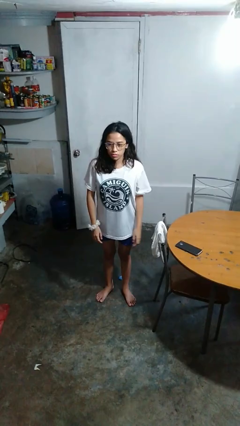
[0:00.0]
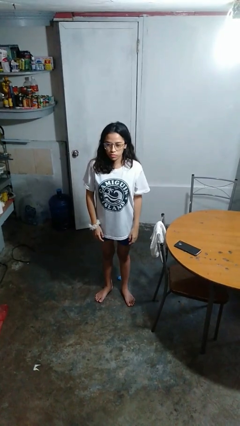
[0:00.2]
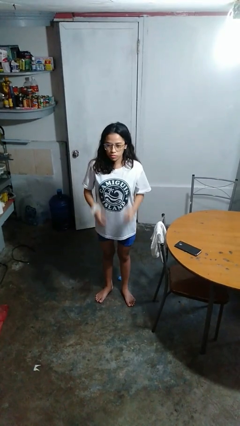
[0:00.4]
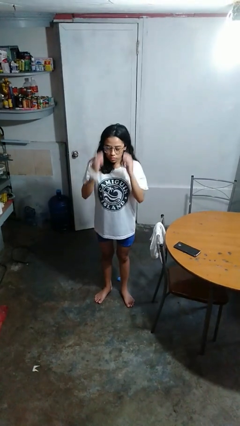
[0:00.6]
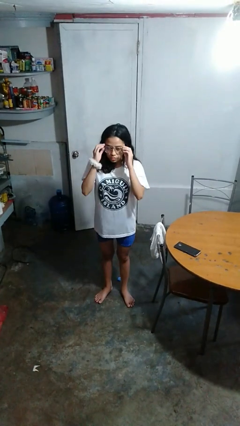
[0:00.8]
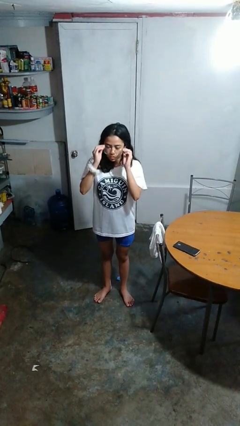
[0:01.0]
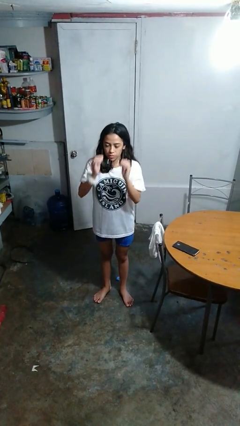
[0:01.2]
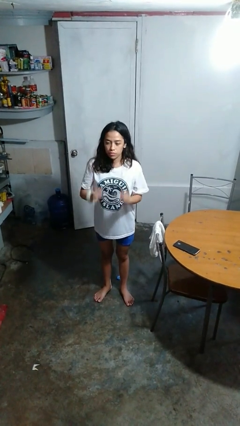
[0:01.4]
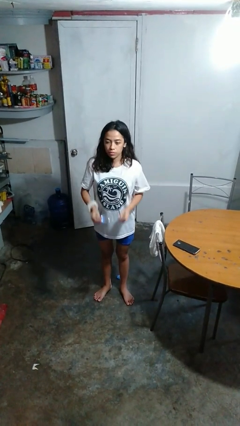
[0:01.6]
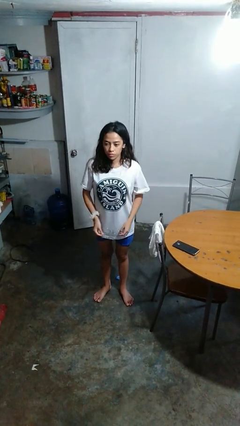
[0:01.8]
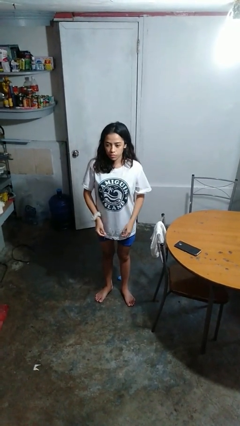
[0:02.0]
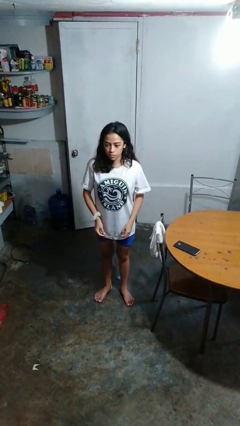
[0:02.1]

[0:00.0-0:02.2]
person takes off glasses

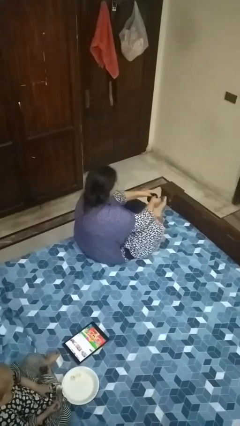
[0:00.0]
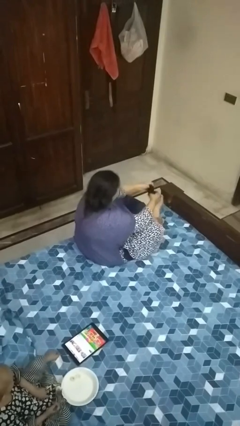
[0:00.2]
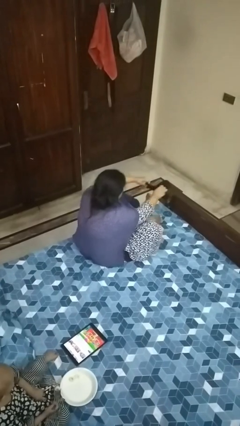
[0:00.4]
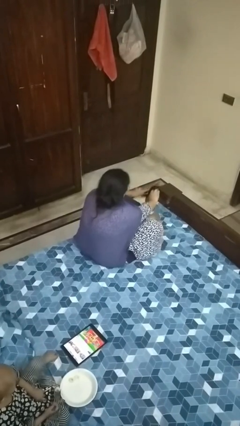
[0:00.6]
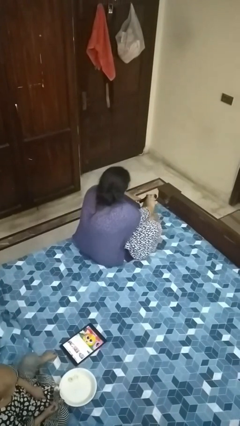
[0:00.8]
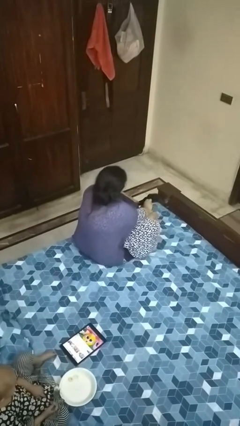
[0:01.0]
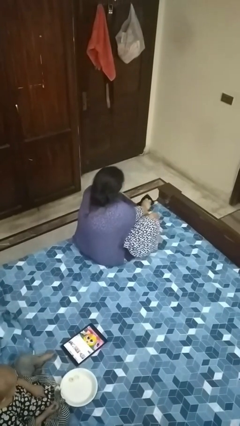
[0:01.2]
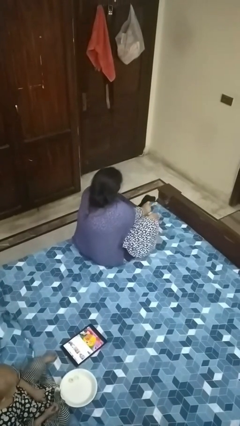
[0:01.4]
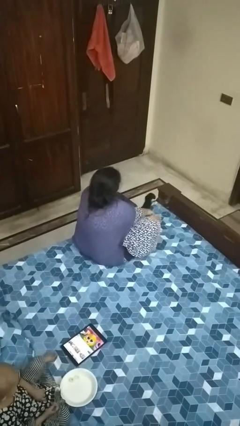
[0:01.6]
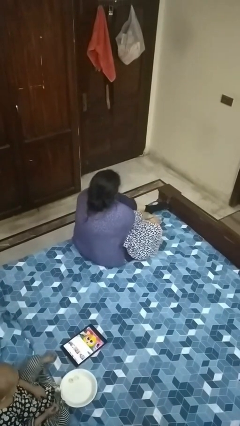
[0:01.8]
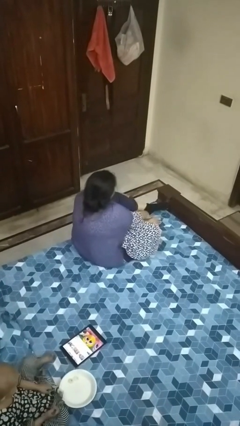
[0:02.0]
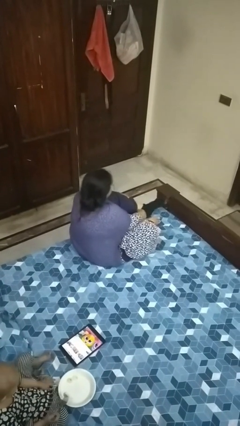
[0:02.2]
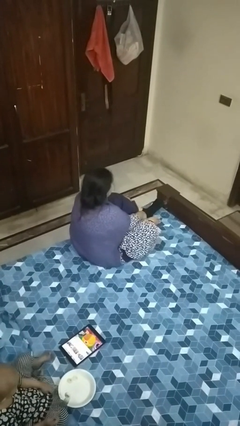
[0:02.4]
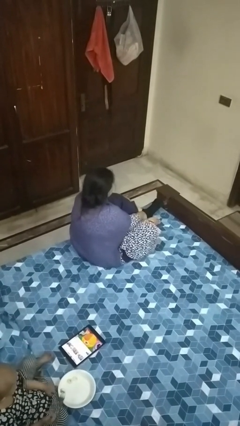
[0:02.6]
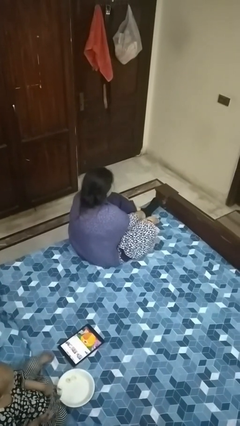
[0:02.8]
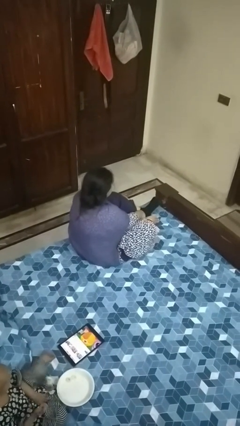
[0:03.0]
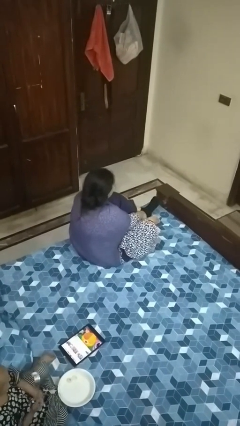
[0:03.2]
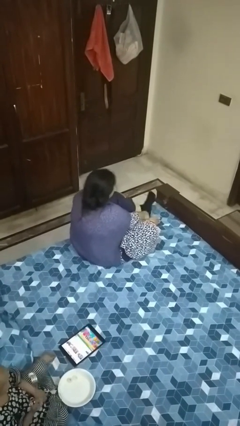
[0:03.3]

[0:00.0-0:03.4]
person puts on socks

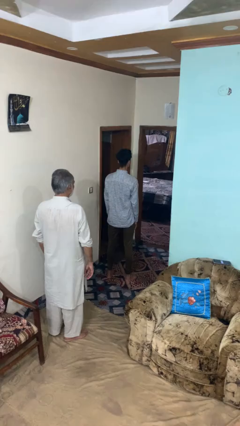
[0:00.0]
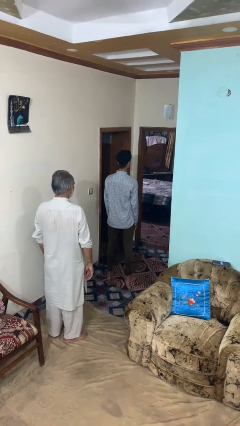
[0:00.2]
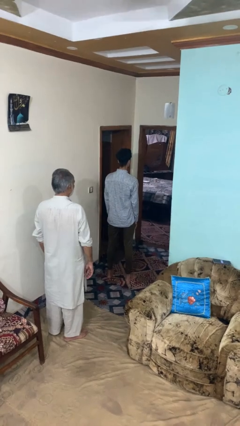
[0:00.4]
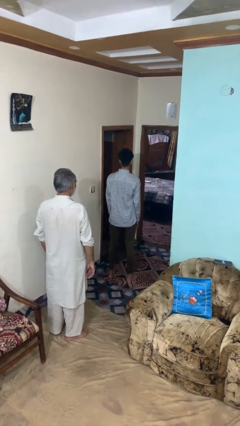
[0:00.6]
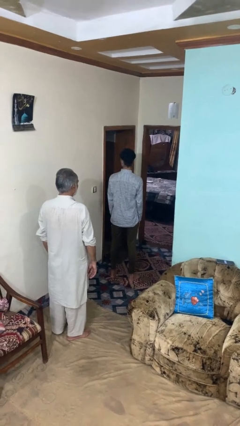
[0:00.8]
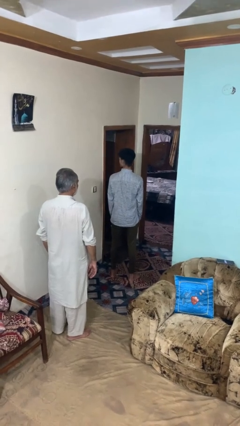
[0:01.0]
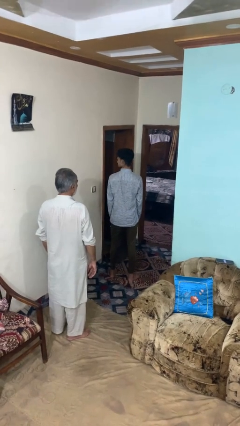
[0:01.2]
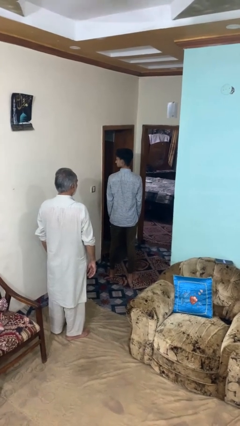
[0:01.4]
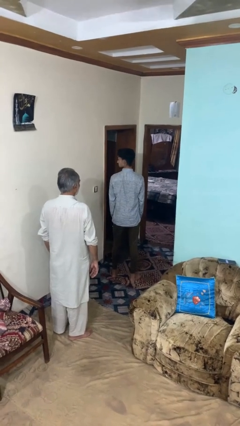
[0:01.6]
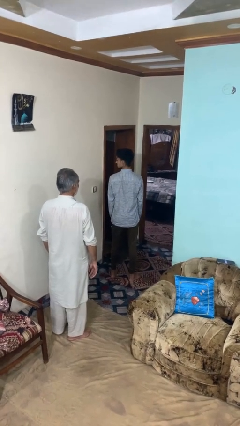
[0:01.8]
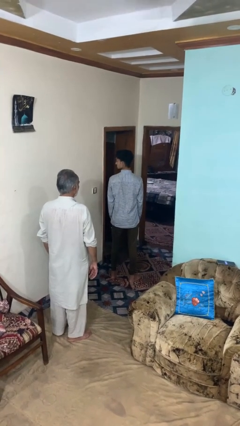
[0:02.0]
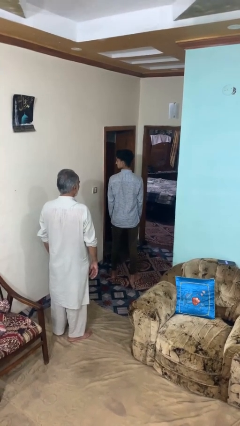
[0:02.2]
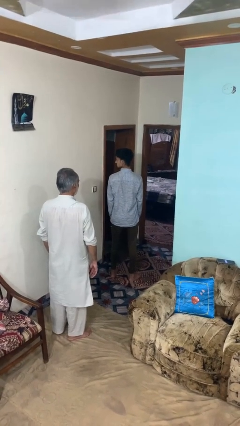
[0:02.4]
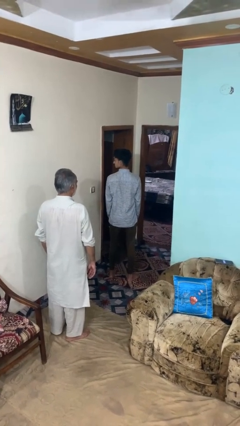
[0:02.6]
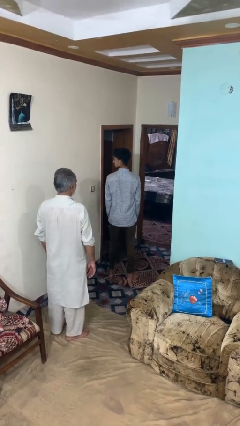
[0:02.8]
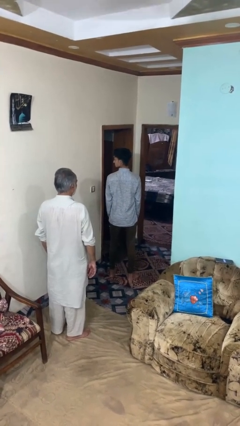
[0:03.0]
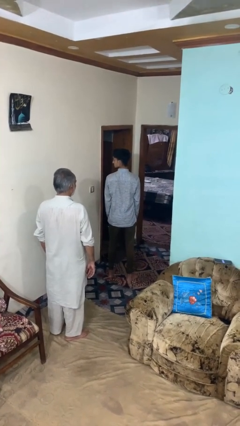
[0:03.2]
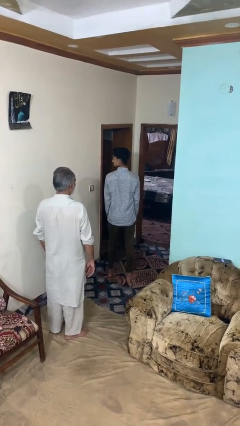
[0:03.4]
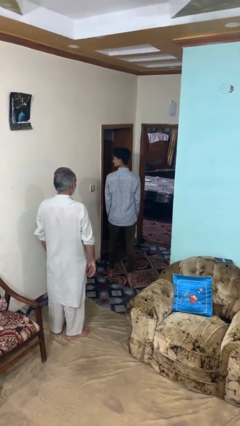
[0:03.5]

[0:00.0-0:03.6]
person looks over shoulder

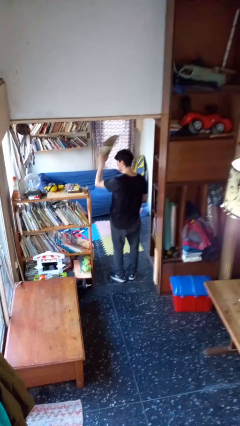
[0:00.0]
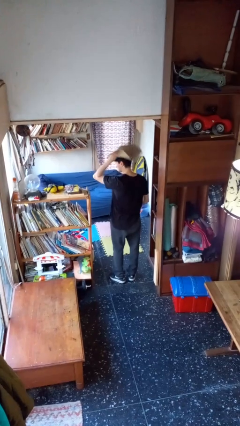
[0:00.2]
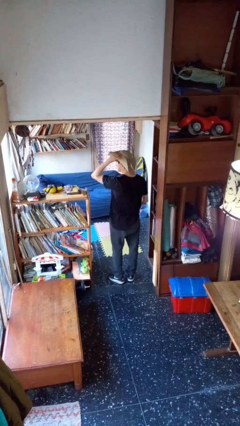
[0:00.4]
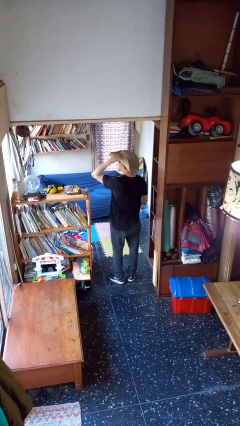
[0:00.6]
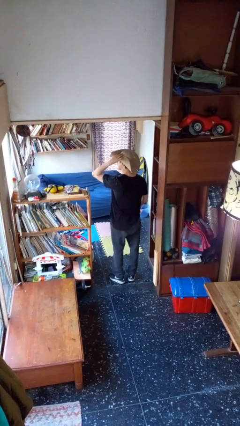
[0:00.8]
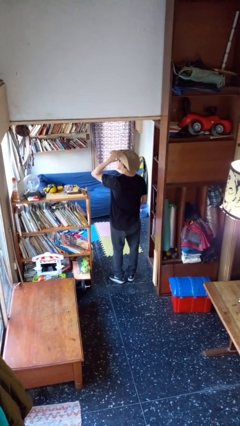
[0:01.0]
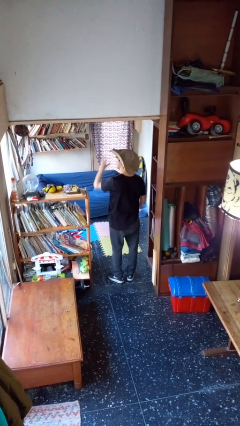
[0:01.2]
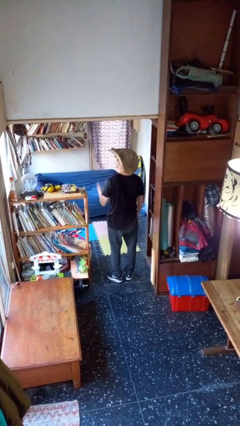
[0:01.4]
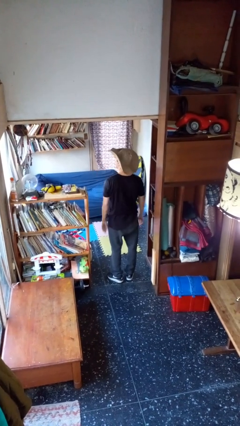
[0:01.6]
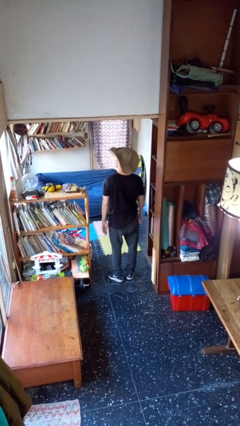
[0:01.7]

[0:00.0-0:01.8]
person puts on hat

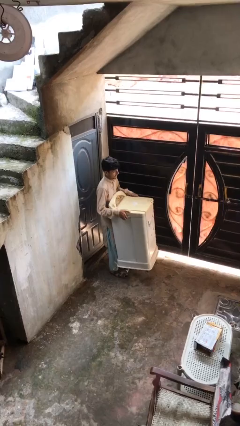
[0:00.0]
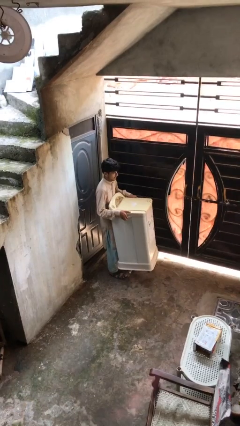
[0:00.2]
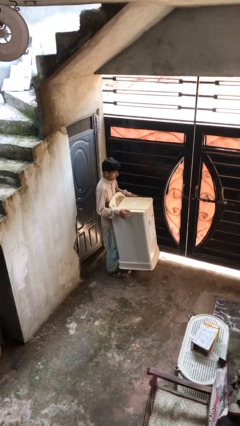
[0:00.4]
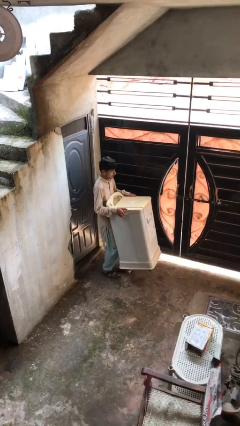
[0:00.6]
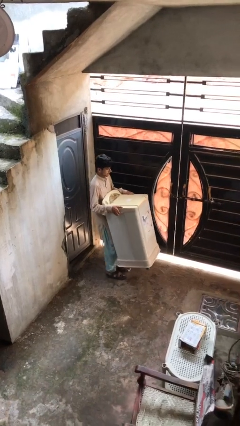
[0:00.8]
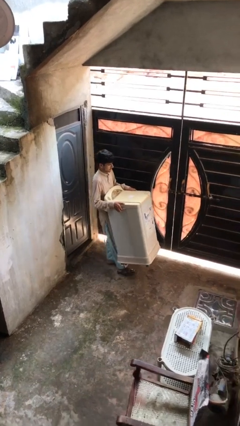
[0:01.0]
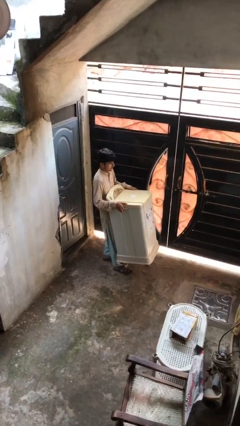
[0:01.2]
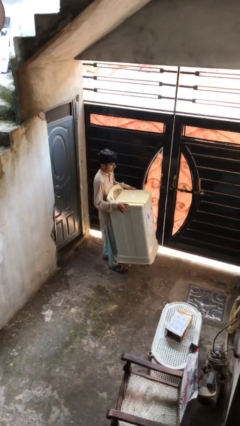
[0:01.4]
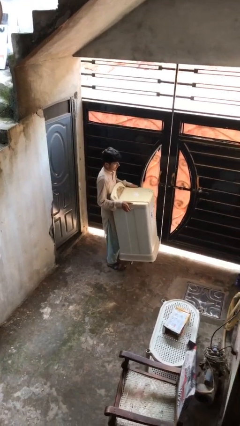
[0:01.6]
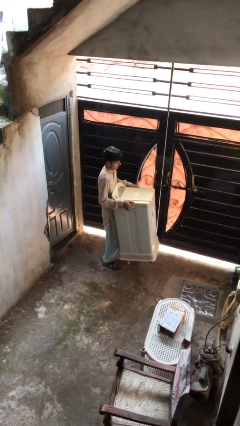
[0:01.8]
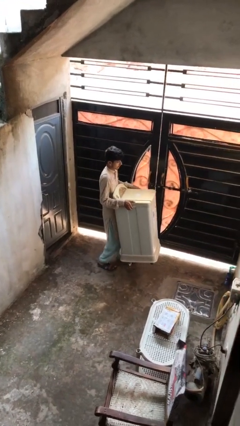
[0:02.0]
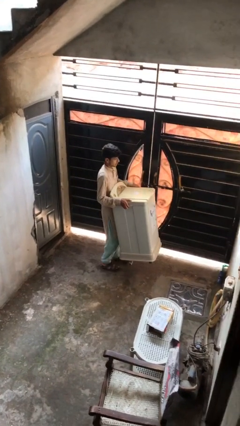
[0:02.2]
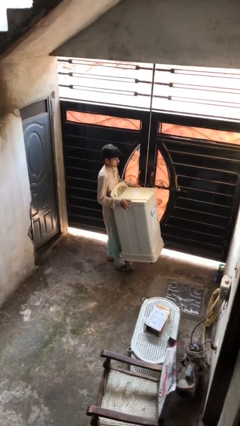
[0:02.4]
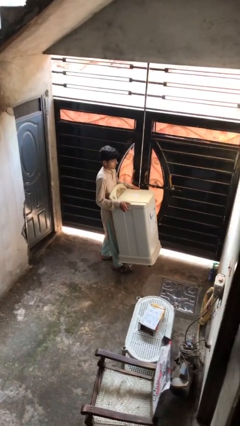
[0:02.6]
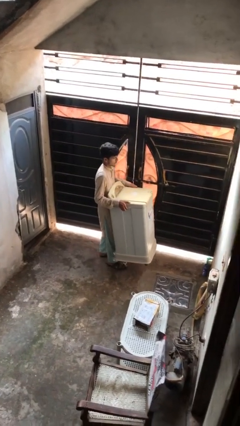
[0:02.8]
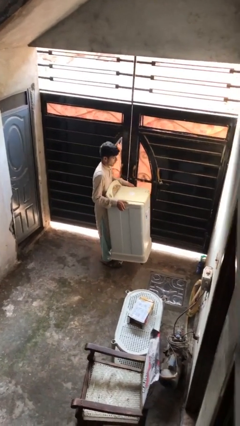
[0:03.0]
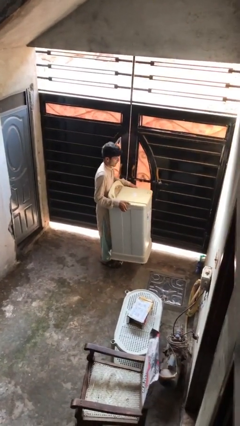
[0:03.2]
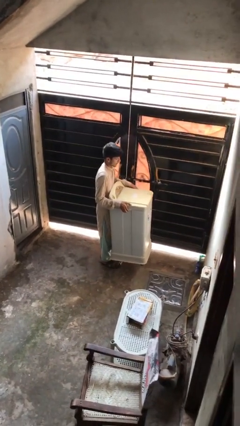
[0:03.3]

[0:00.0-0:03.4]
person carries heavy object

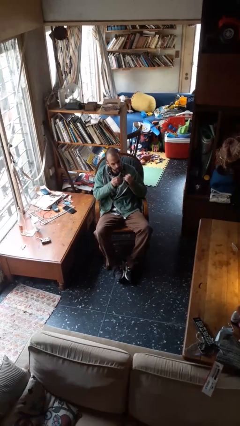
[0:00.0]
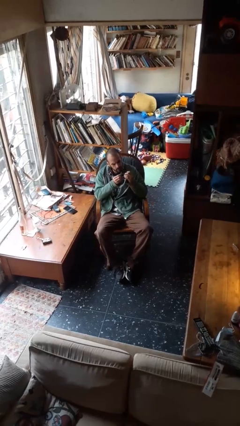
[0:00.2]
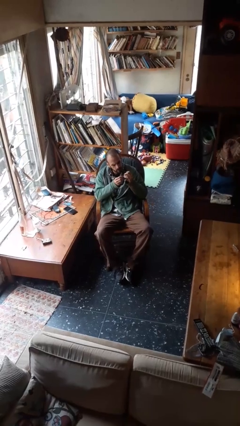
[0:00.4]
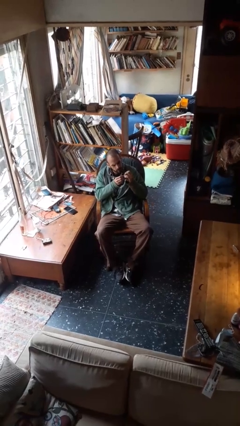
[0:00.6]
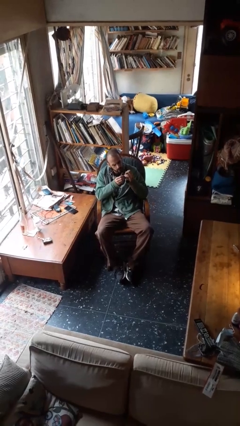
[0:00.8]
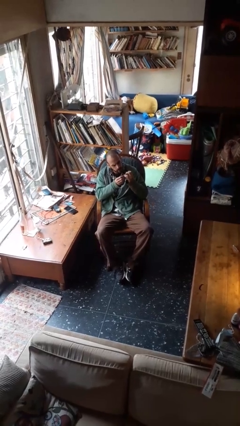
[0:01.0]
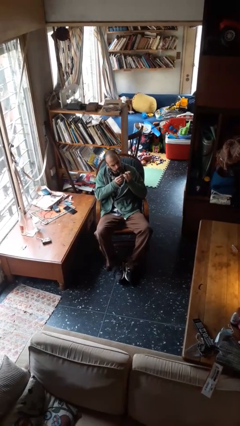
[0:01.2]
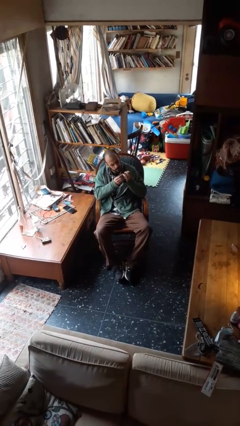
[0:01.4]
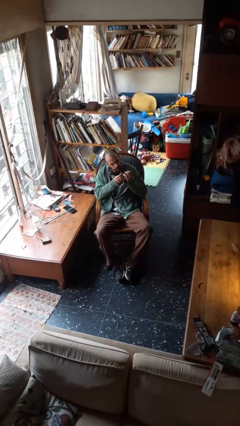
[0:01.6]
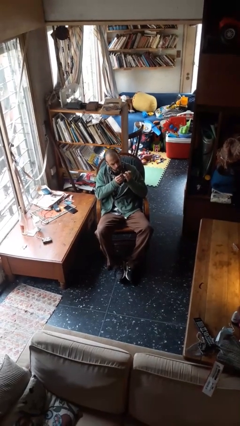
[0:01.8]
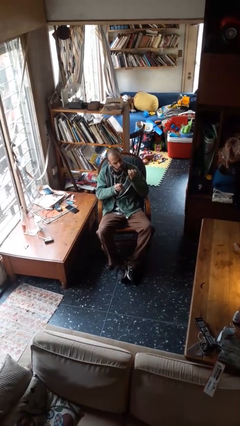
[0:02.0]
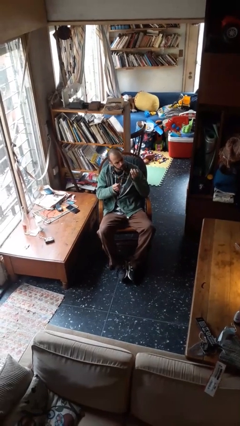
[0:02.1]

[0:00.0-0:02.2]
person files fingernails

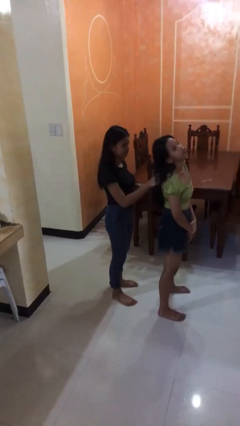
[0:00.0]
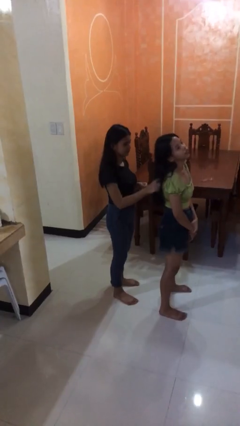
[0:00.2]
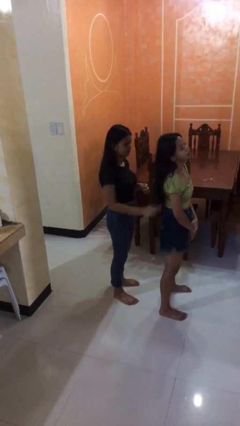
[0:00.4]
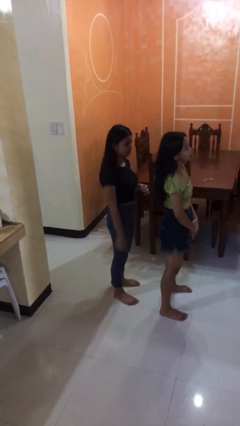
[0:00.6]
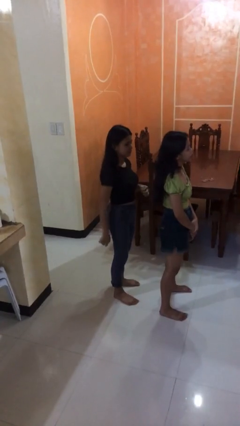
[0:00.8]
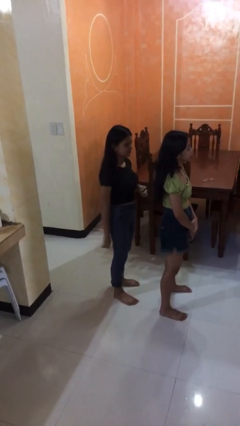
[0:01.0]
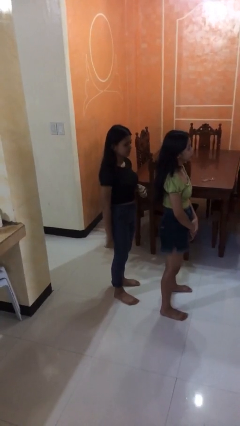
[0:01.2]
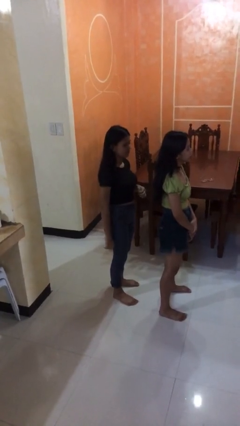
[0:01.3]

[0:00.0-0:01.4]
person grabs person by hair
